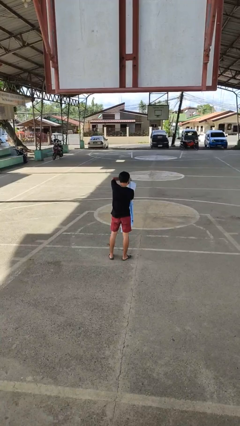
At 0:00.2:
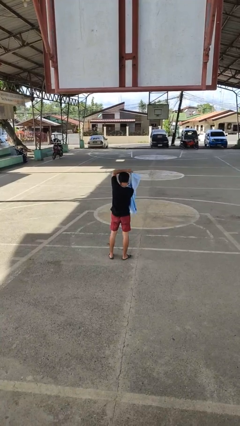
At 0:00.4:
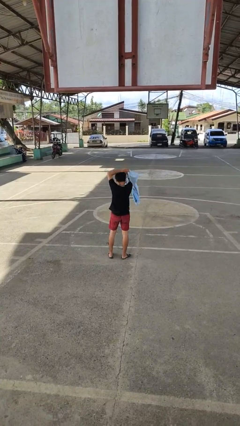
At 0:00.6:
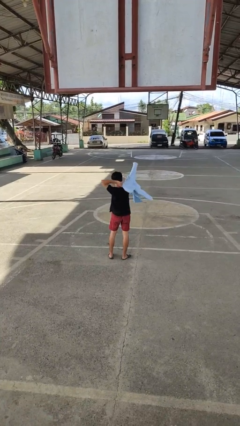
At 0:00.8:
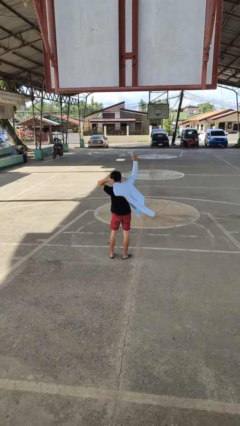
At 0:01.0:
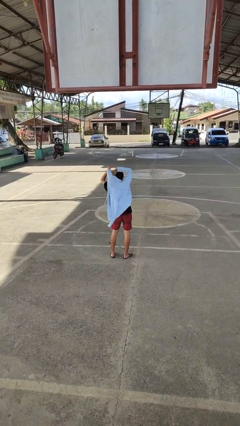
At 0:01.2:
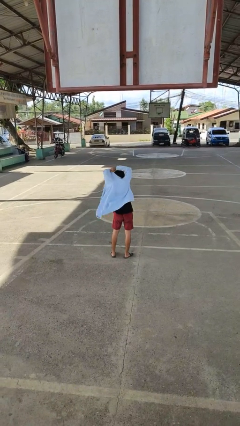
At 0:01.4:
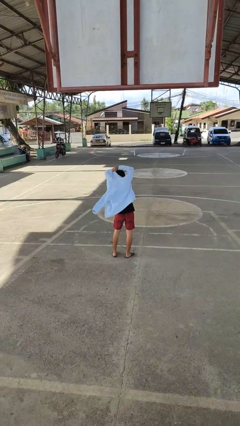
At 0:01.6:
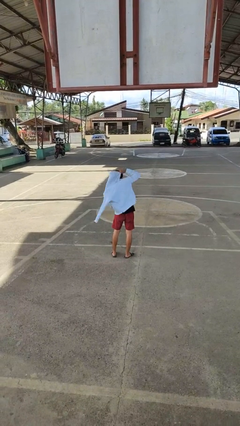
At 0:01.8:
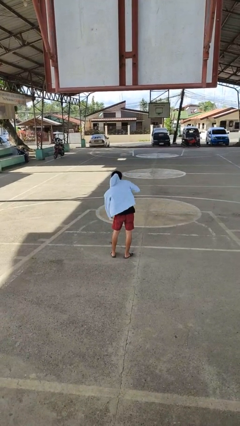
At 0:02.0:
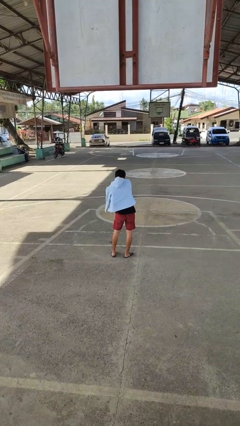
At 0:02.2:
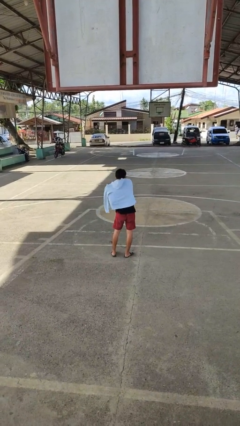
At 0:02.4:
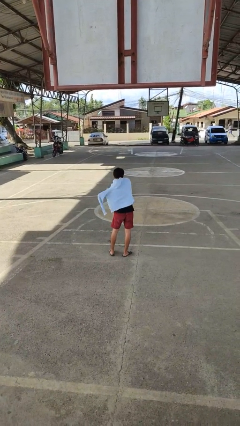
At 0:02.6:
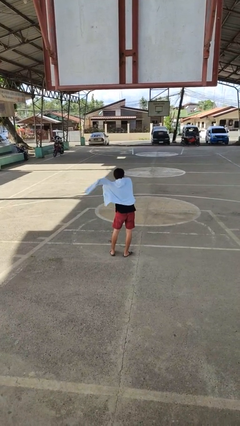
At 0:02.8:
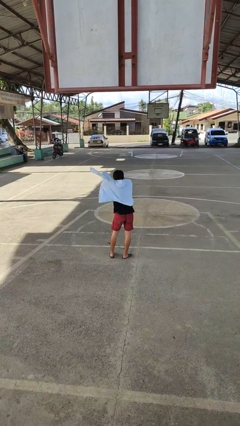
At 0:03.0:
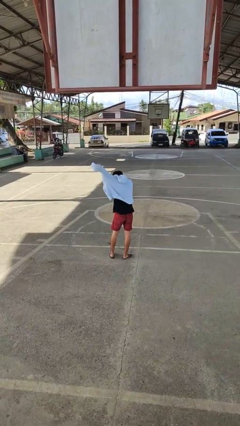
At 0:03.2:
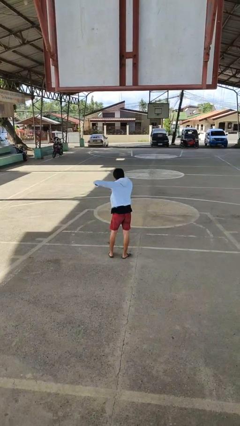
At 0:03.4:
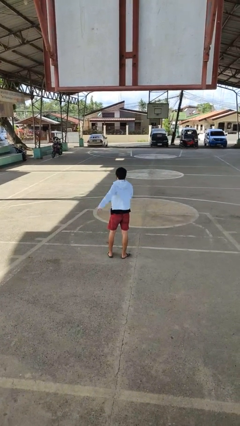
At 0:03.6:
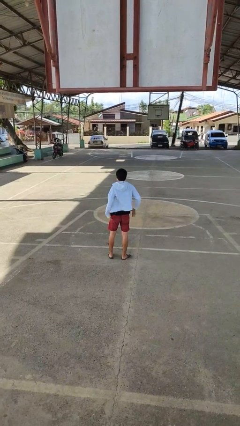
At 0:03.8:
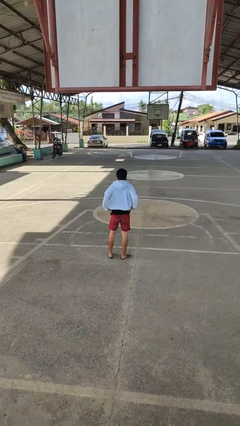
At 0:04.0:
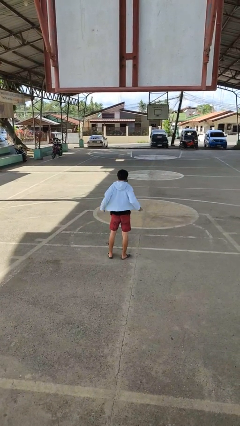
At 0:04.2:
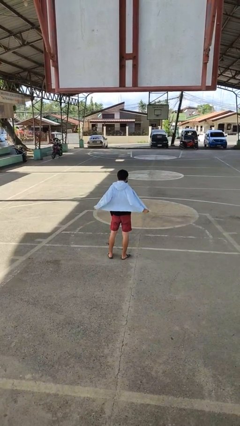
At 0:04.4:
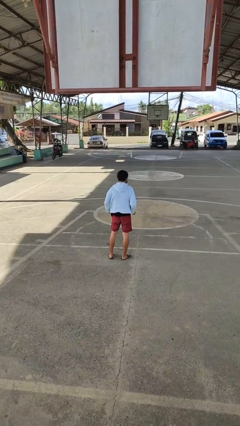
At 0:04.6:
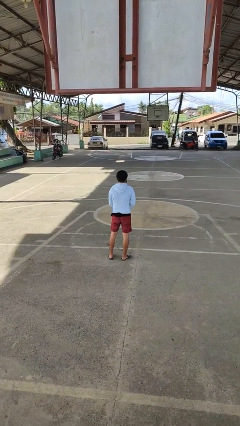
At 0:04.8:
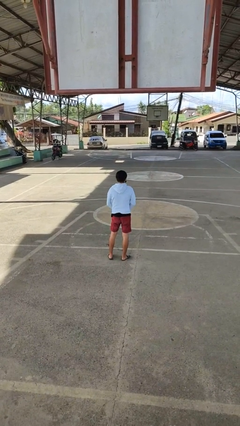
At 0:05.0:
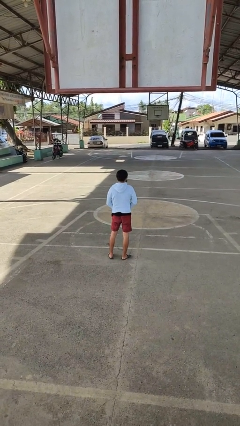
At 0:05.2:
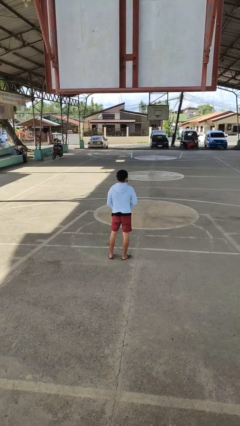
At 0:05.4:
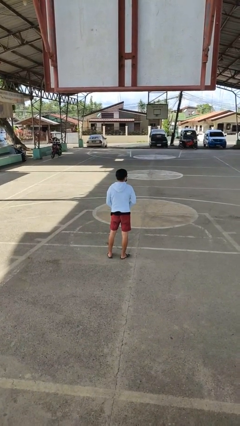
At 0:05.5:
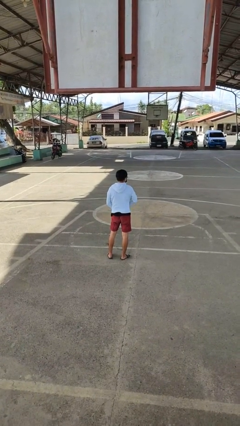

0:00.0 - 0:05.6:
person puts on jacket

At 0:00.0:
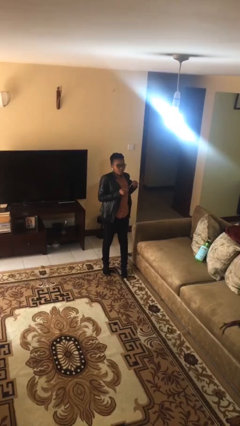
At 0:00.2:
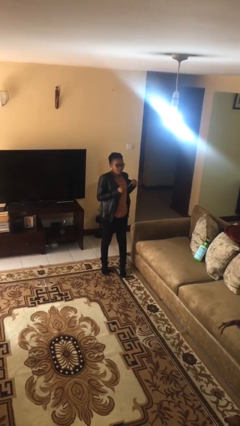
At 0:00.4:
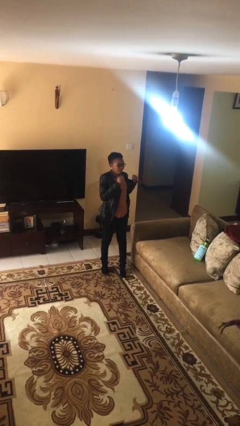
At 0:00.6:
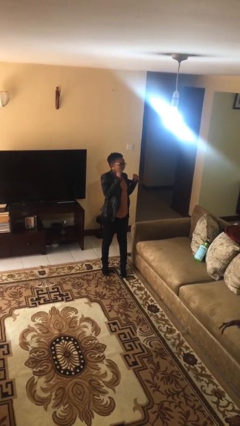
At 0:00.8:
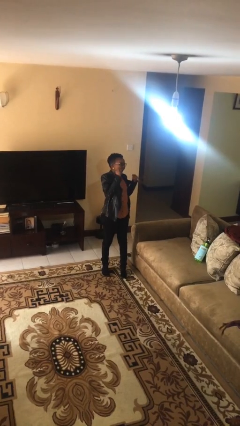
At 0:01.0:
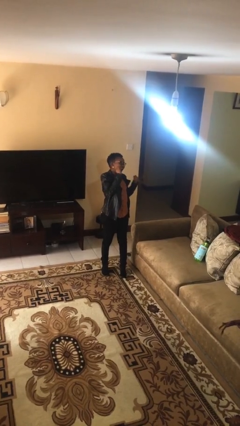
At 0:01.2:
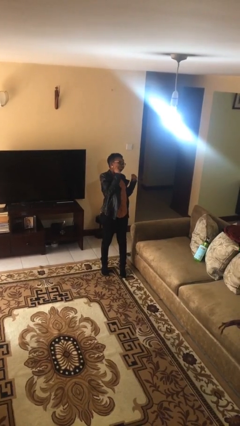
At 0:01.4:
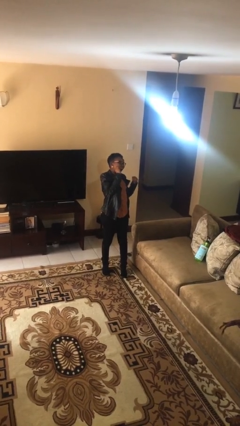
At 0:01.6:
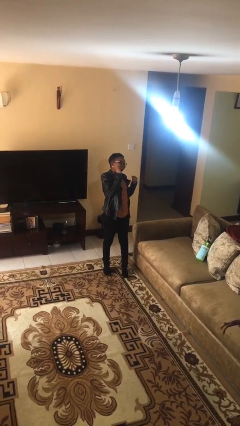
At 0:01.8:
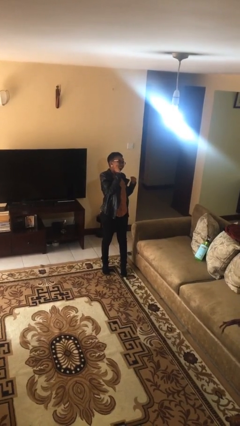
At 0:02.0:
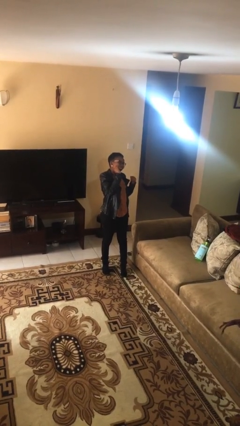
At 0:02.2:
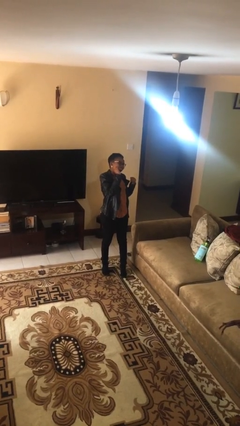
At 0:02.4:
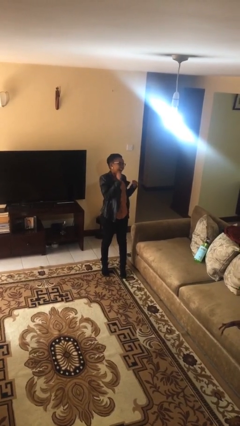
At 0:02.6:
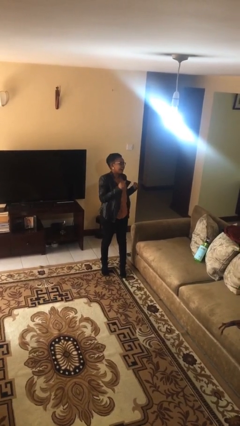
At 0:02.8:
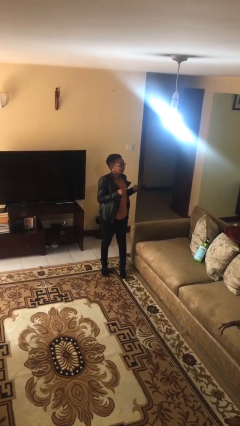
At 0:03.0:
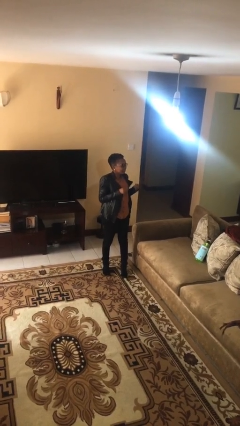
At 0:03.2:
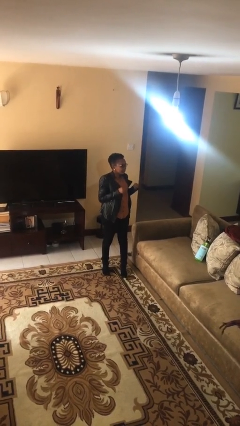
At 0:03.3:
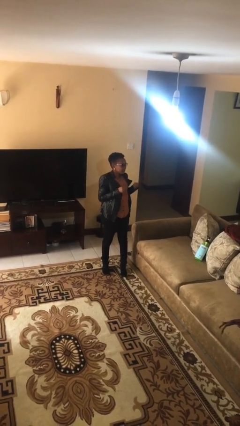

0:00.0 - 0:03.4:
person flosses

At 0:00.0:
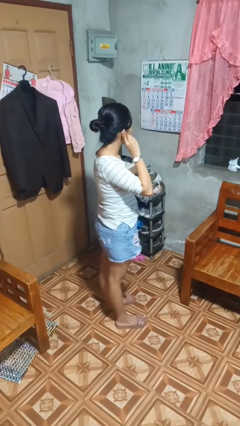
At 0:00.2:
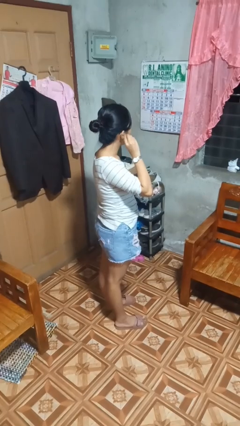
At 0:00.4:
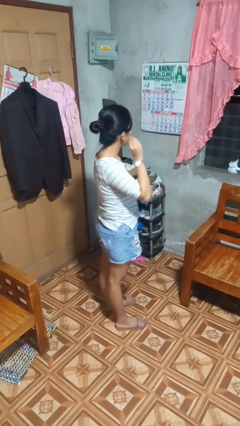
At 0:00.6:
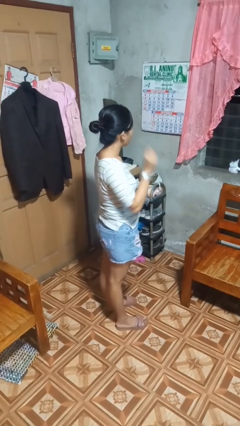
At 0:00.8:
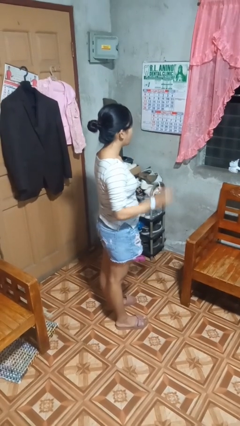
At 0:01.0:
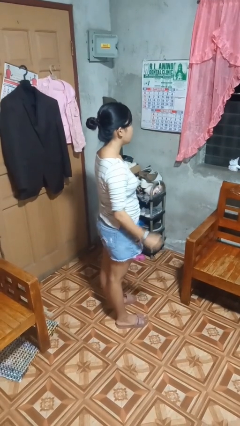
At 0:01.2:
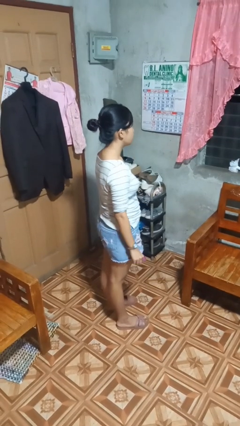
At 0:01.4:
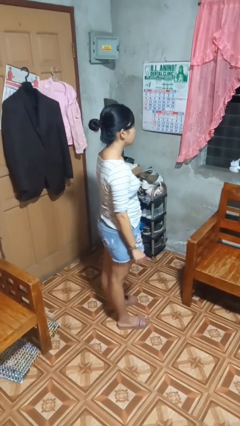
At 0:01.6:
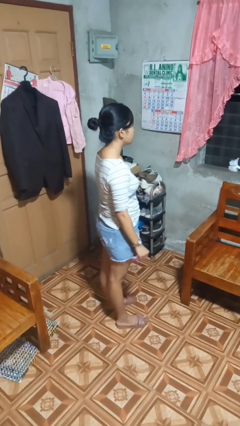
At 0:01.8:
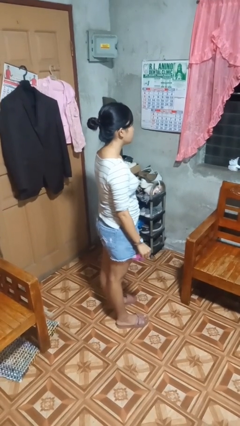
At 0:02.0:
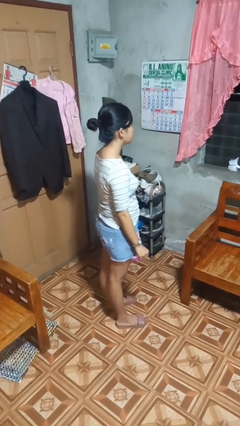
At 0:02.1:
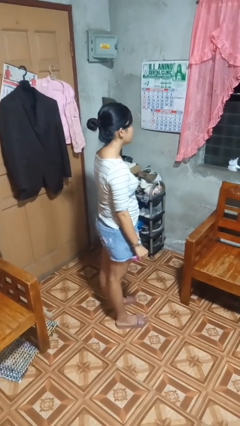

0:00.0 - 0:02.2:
person takes off earrings

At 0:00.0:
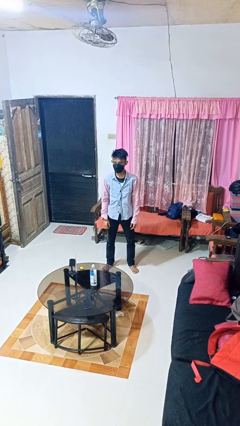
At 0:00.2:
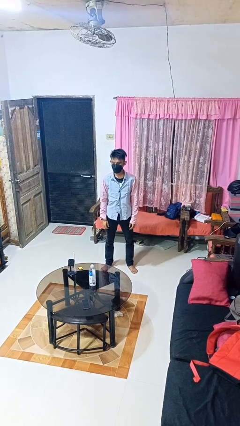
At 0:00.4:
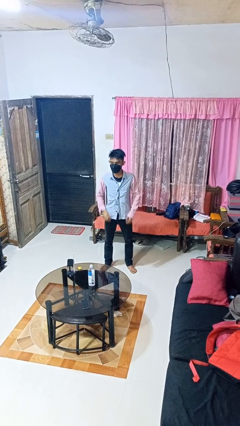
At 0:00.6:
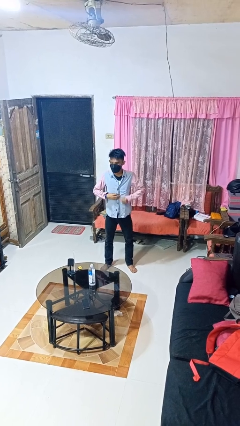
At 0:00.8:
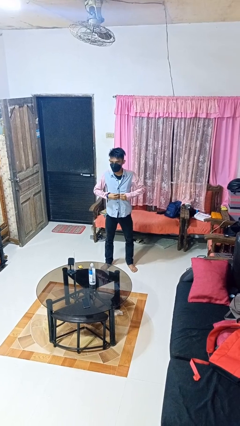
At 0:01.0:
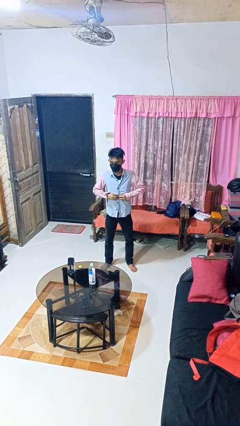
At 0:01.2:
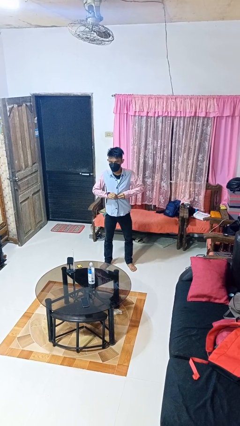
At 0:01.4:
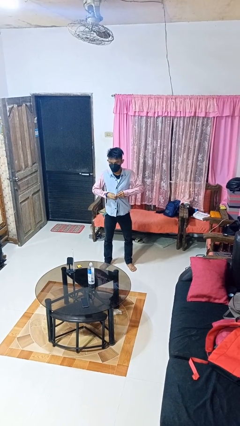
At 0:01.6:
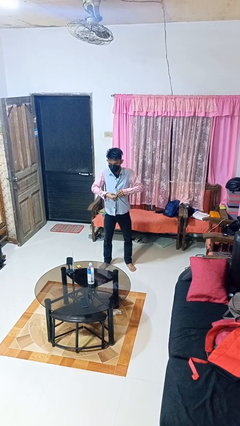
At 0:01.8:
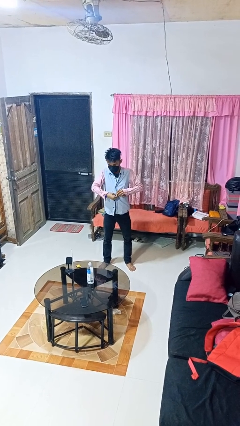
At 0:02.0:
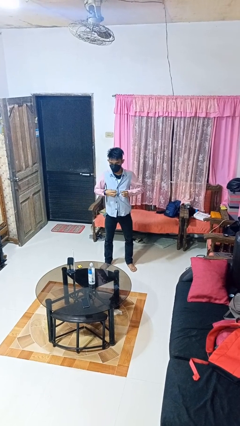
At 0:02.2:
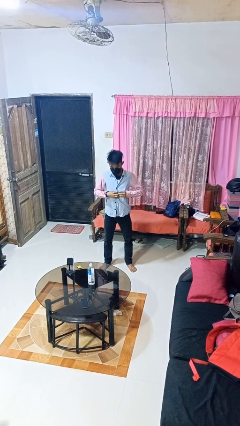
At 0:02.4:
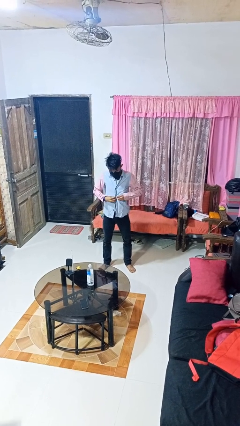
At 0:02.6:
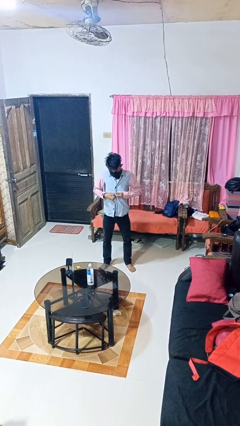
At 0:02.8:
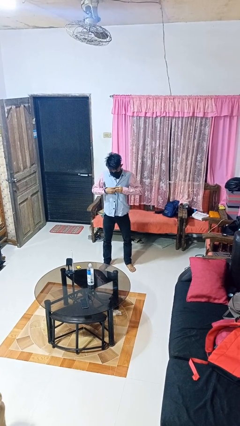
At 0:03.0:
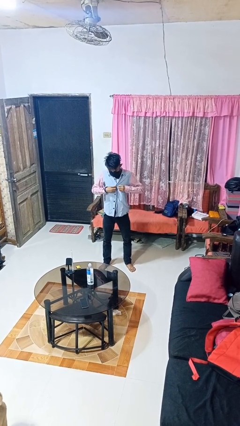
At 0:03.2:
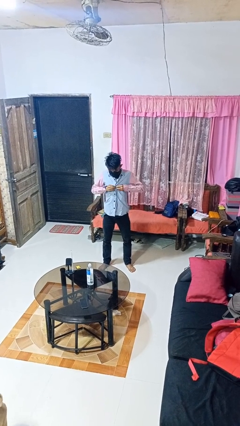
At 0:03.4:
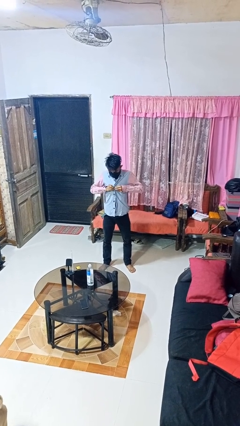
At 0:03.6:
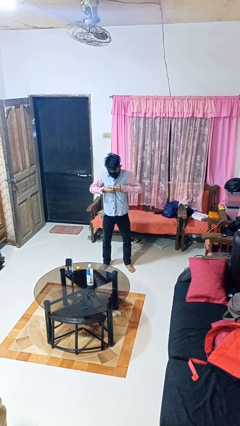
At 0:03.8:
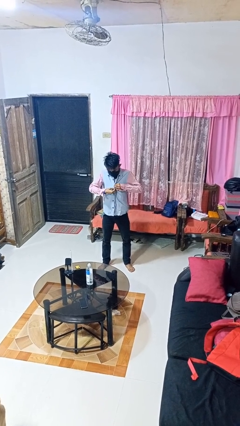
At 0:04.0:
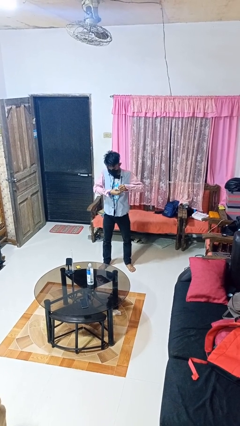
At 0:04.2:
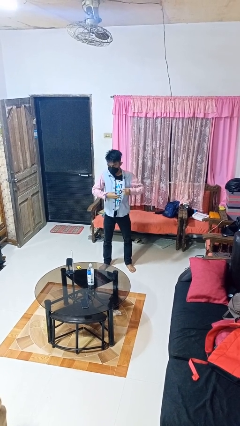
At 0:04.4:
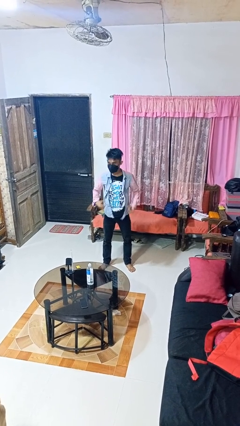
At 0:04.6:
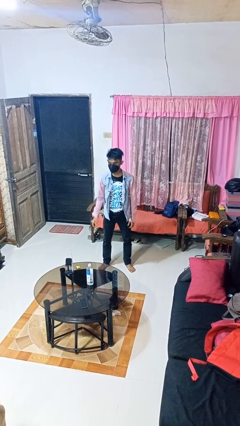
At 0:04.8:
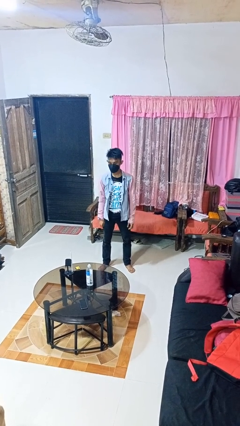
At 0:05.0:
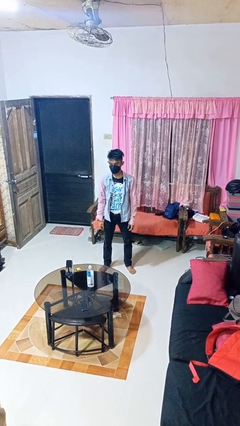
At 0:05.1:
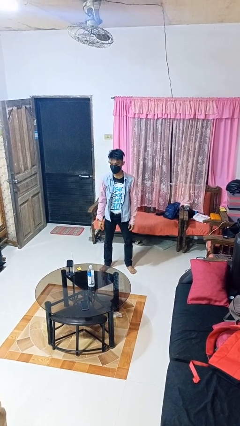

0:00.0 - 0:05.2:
person unbuttons shirt

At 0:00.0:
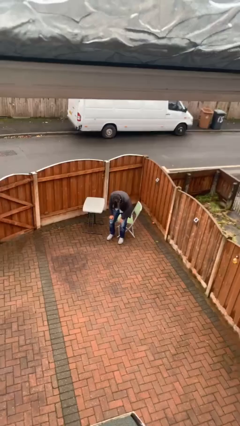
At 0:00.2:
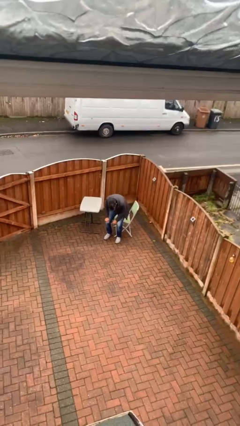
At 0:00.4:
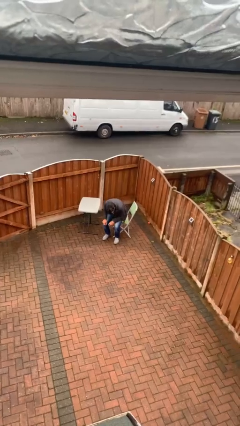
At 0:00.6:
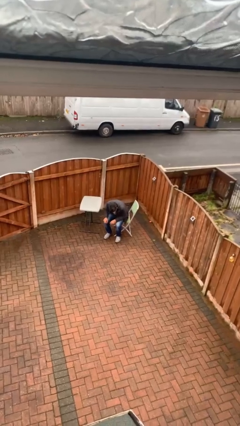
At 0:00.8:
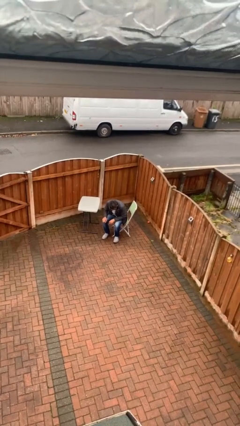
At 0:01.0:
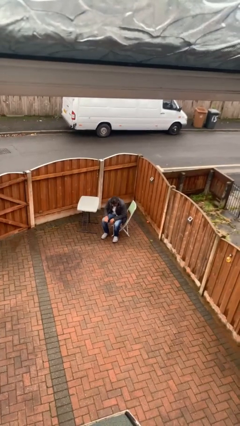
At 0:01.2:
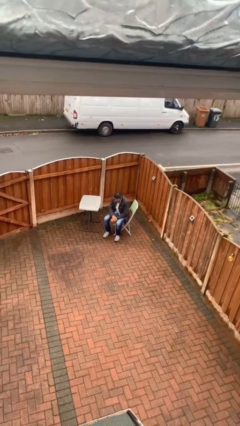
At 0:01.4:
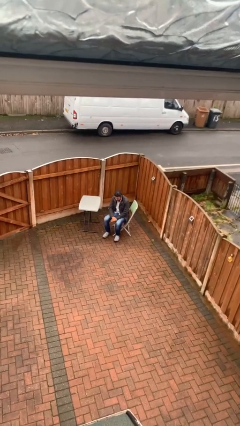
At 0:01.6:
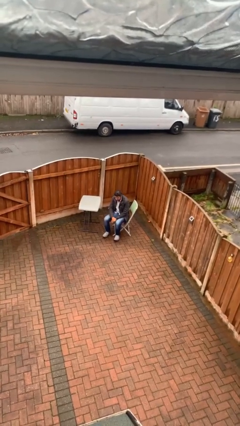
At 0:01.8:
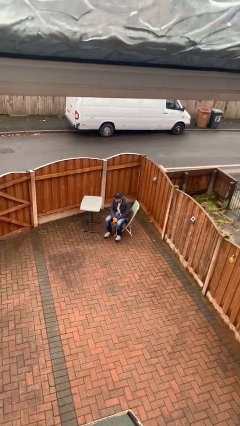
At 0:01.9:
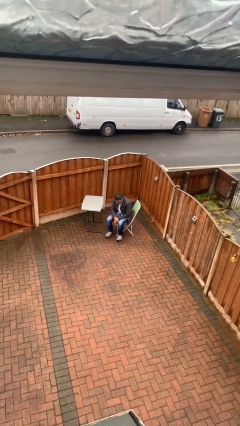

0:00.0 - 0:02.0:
person sits down
